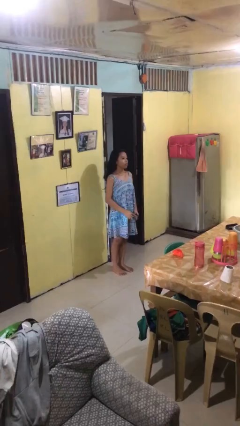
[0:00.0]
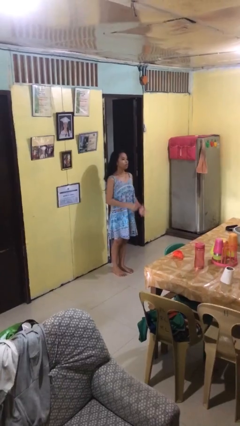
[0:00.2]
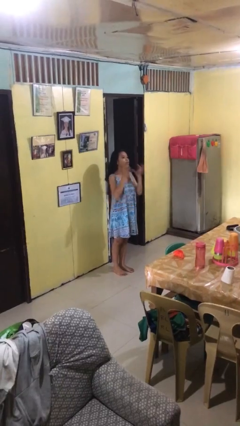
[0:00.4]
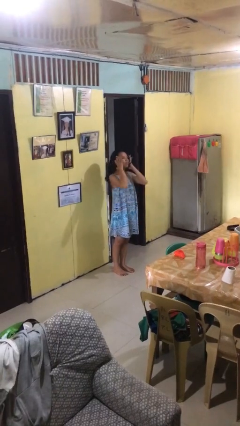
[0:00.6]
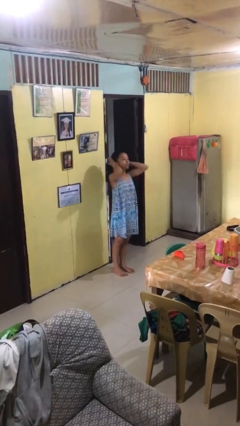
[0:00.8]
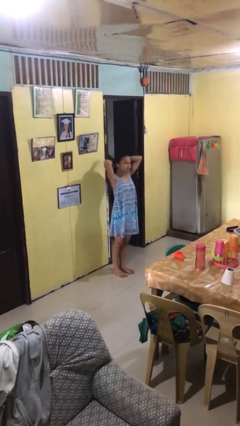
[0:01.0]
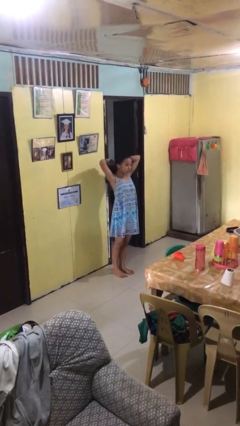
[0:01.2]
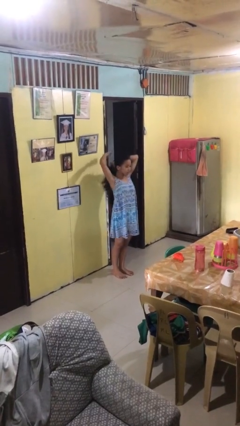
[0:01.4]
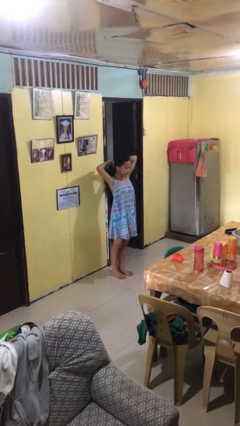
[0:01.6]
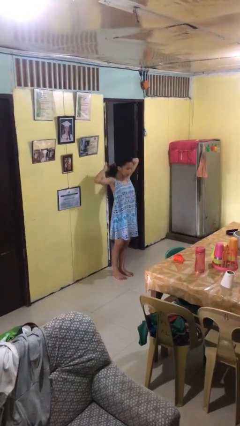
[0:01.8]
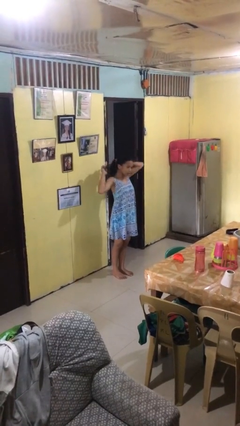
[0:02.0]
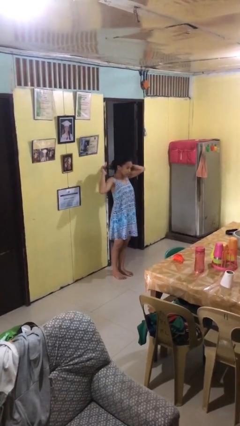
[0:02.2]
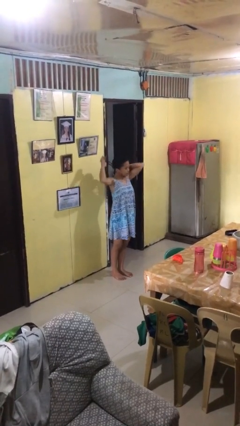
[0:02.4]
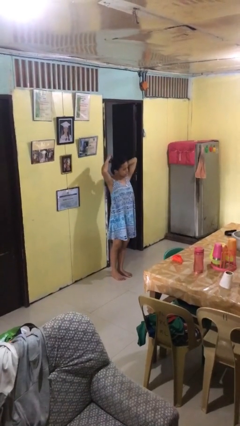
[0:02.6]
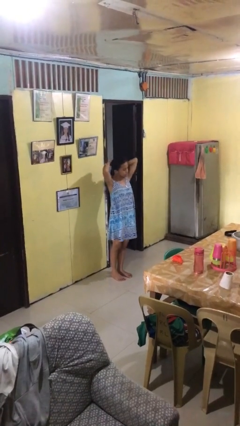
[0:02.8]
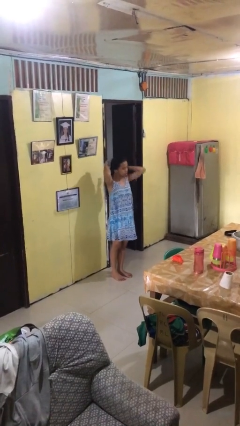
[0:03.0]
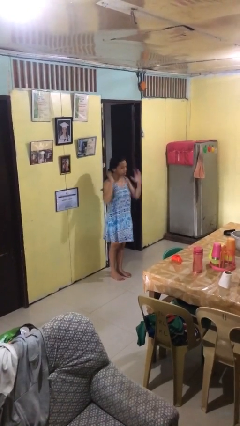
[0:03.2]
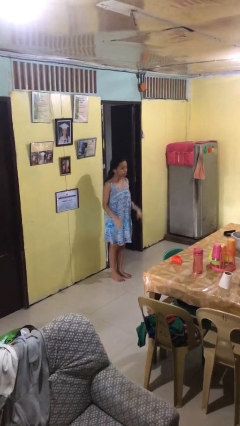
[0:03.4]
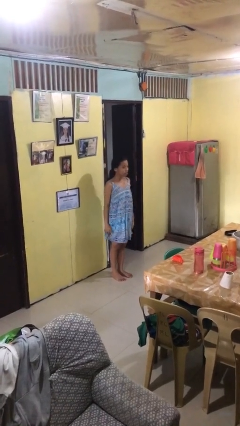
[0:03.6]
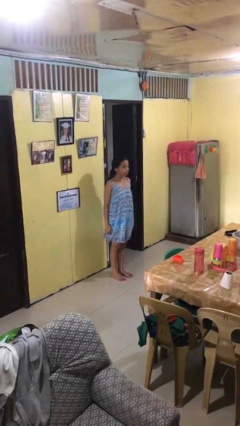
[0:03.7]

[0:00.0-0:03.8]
person puts hair in ponytail

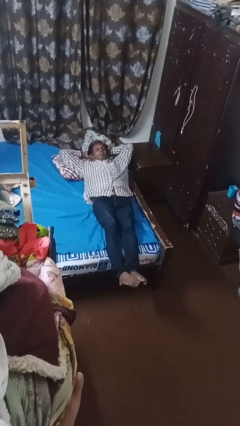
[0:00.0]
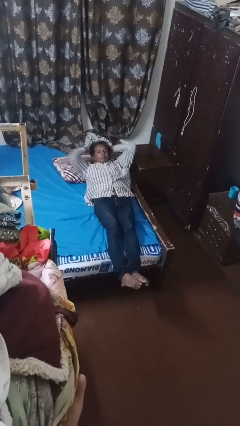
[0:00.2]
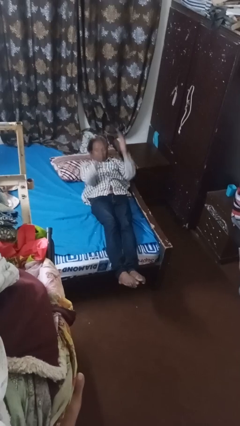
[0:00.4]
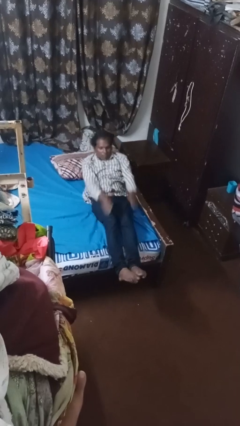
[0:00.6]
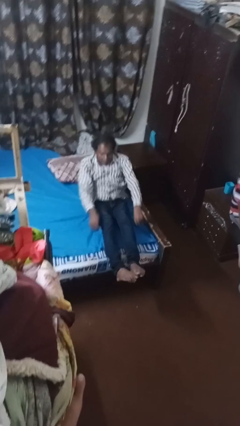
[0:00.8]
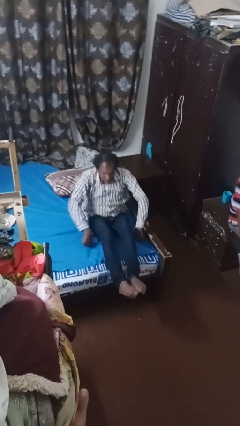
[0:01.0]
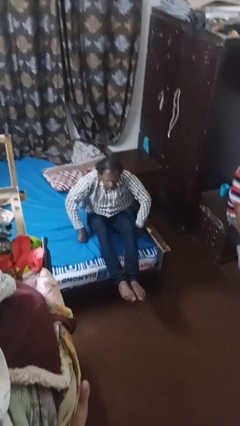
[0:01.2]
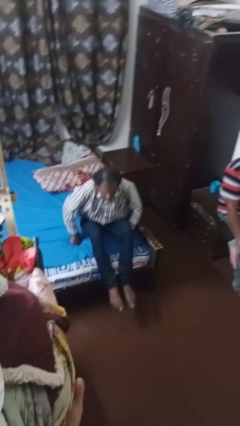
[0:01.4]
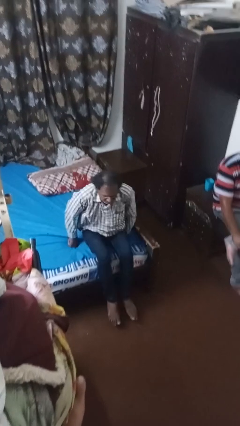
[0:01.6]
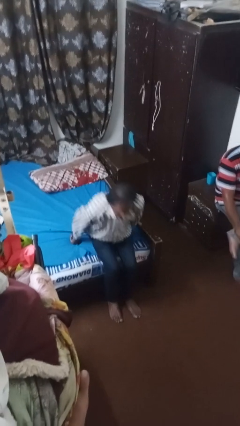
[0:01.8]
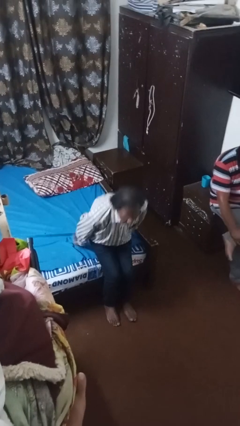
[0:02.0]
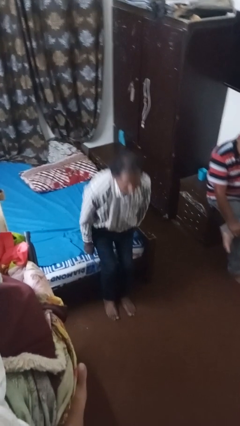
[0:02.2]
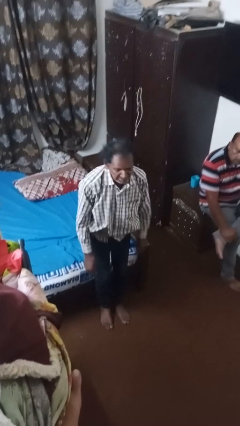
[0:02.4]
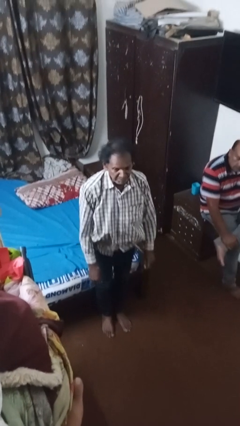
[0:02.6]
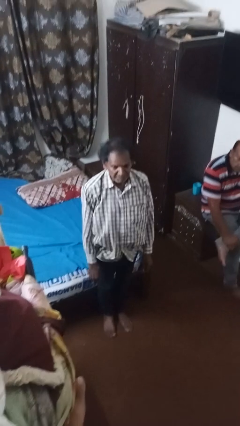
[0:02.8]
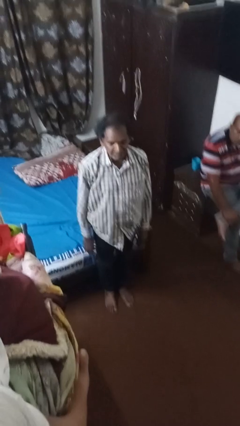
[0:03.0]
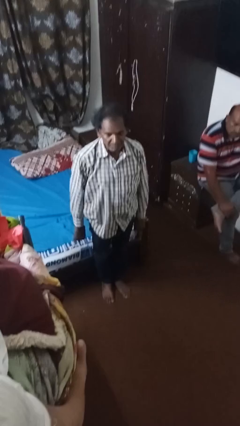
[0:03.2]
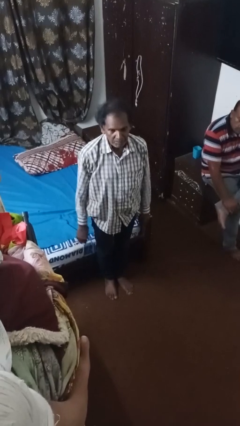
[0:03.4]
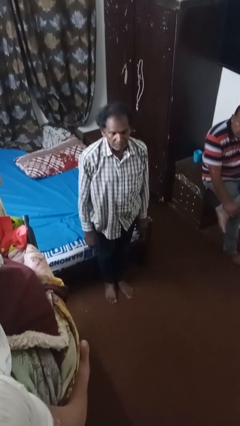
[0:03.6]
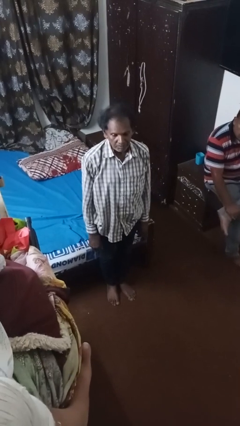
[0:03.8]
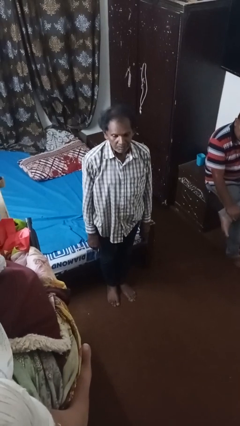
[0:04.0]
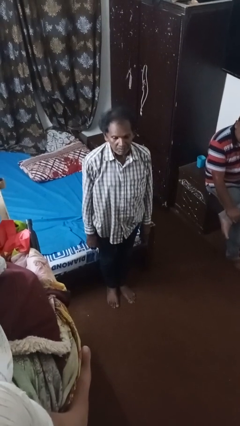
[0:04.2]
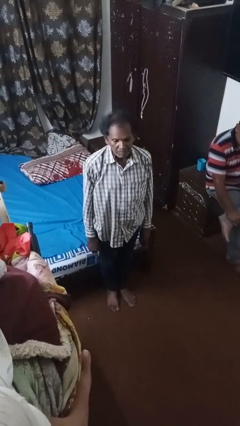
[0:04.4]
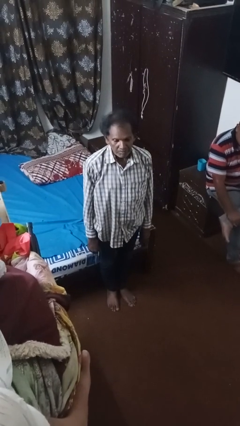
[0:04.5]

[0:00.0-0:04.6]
person stands up

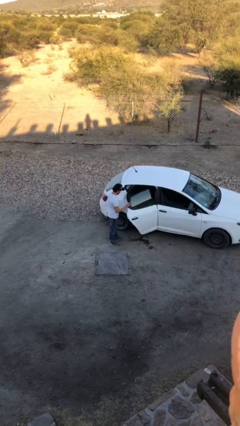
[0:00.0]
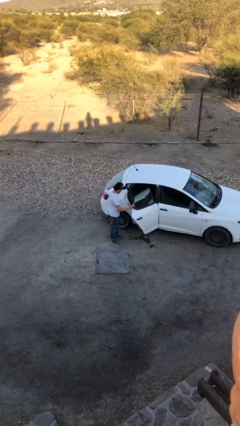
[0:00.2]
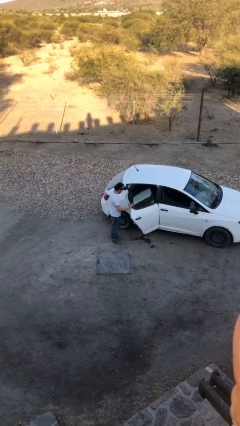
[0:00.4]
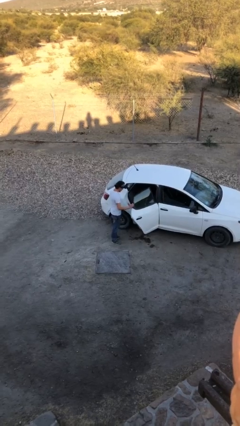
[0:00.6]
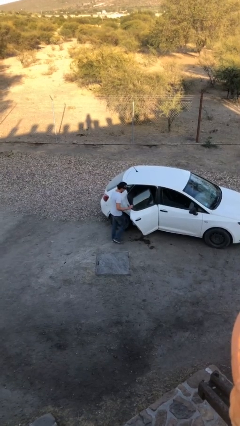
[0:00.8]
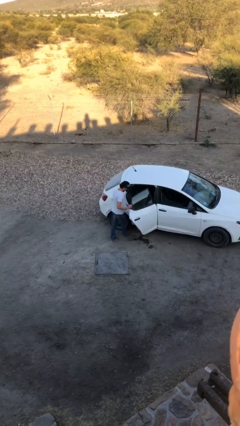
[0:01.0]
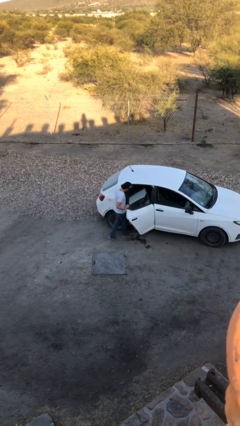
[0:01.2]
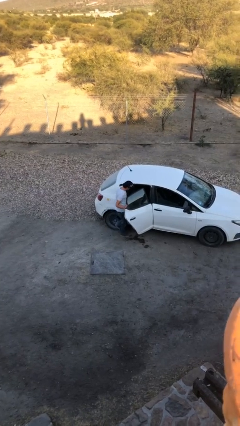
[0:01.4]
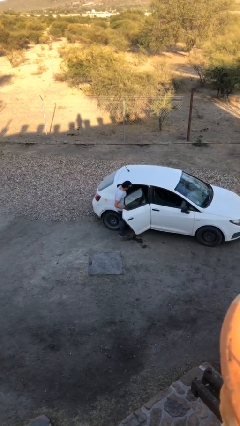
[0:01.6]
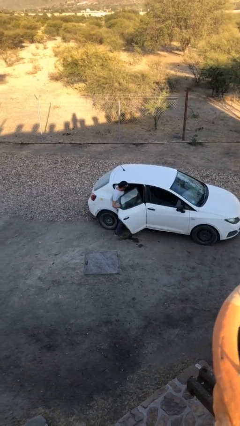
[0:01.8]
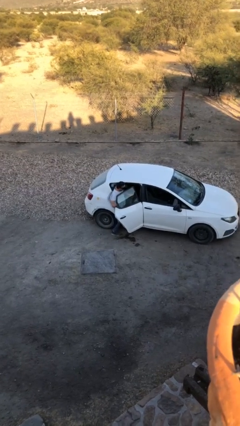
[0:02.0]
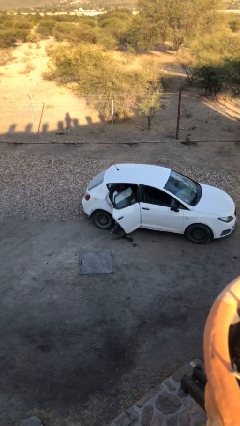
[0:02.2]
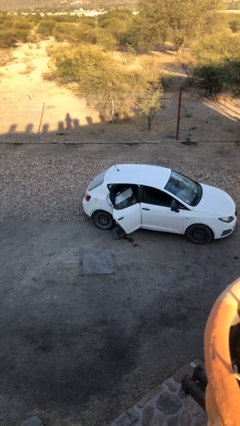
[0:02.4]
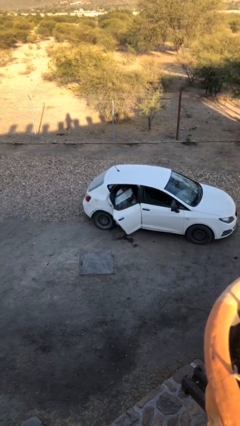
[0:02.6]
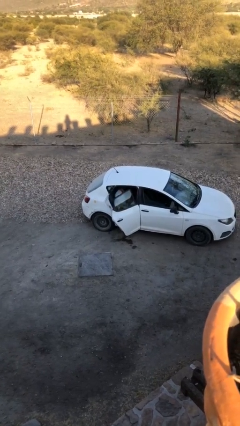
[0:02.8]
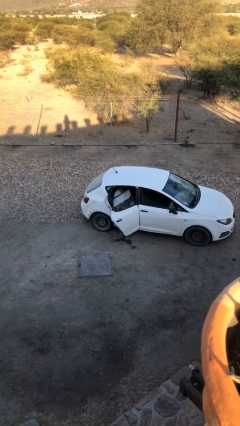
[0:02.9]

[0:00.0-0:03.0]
person enters car

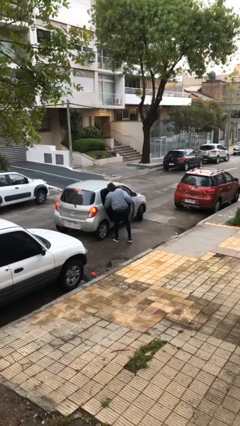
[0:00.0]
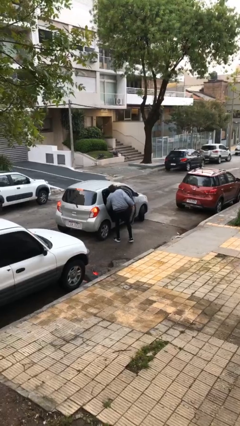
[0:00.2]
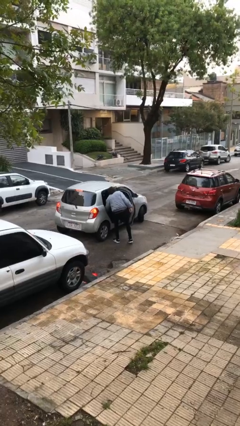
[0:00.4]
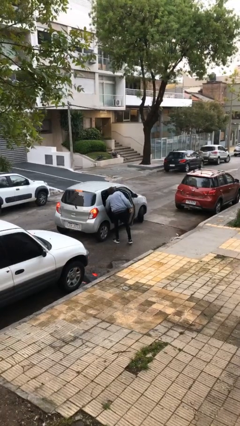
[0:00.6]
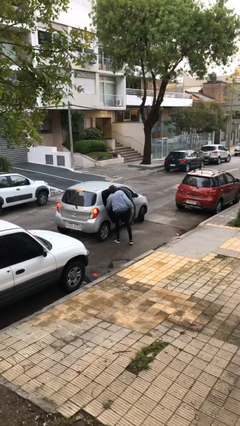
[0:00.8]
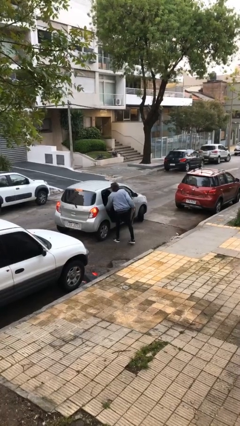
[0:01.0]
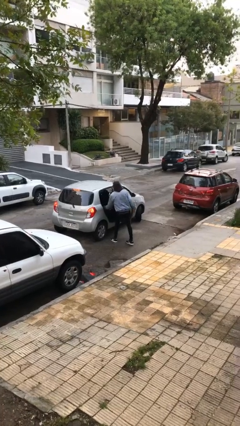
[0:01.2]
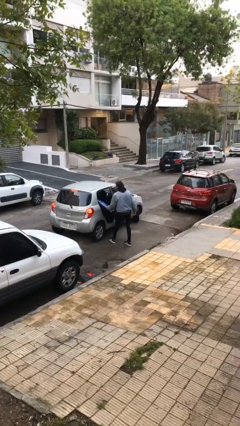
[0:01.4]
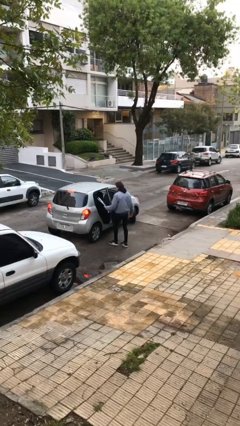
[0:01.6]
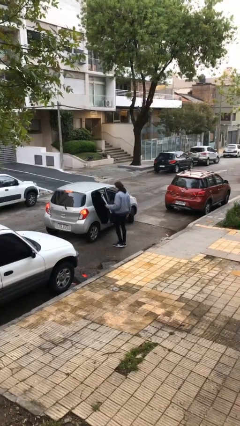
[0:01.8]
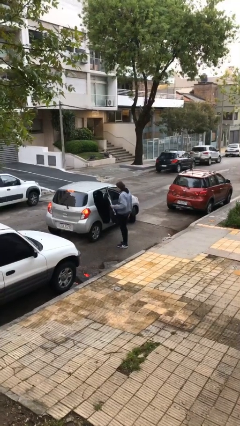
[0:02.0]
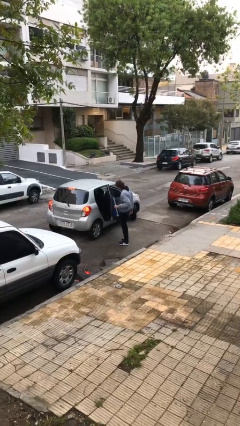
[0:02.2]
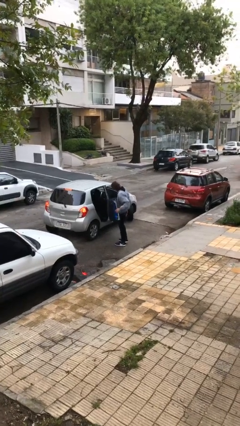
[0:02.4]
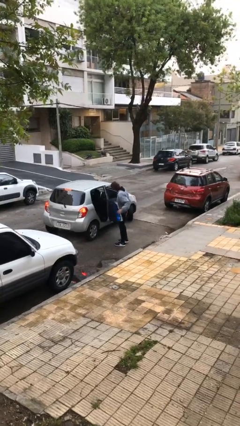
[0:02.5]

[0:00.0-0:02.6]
person unloads car

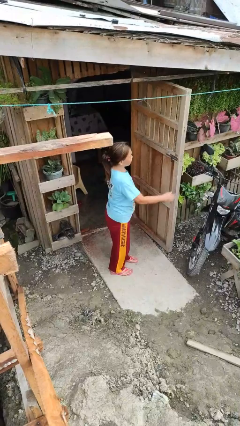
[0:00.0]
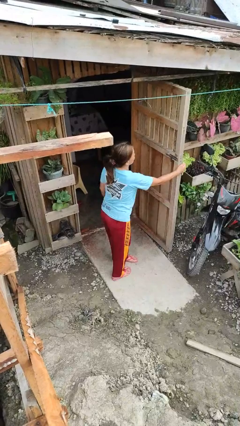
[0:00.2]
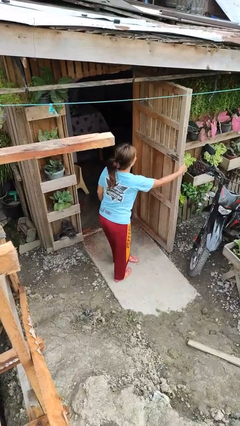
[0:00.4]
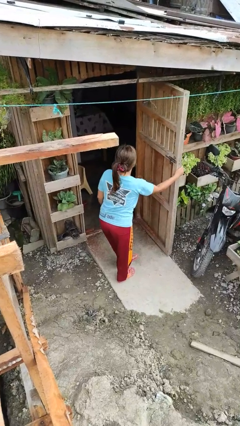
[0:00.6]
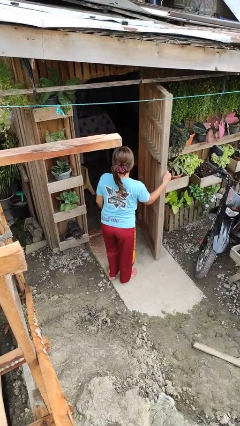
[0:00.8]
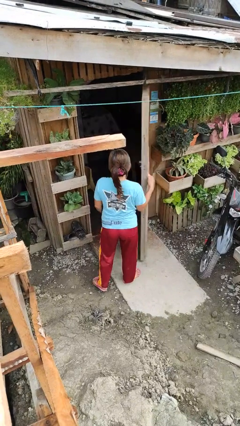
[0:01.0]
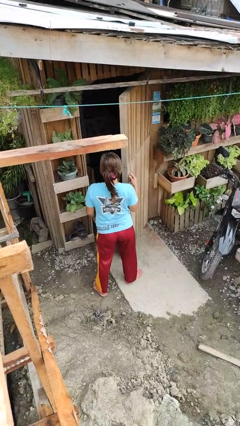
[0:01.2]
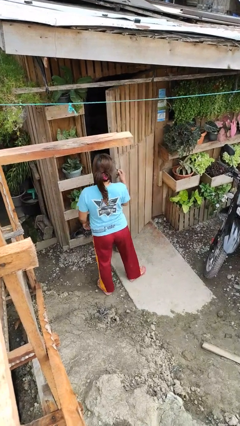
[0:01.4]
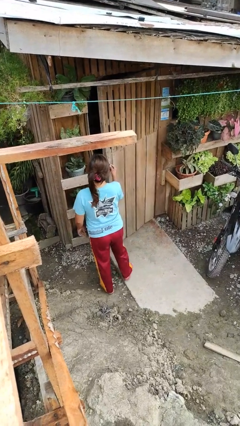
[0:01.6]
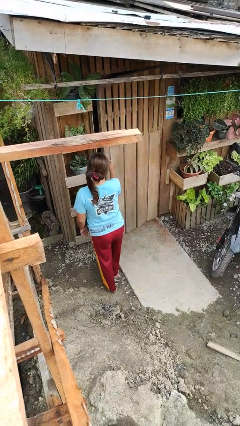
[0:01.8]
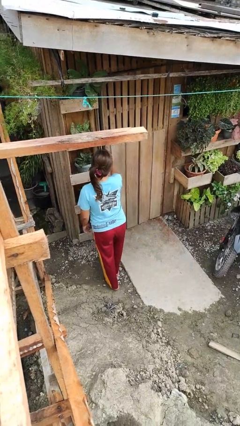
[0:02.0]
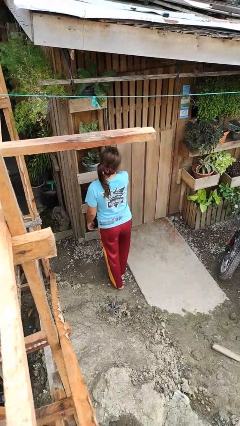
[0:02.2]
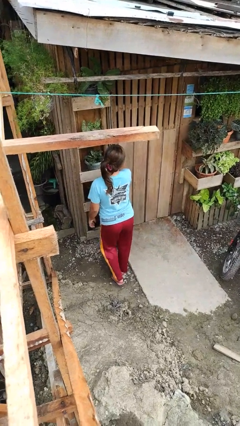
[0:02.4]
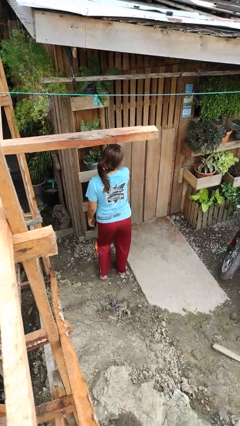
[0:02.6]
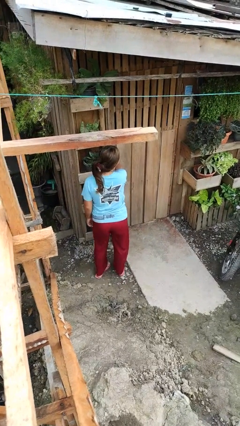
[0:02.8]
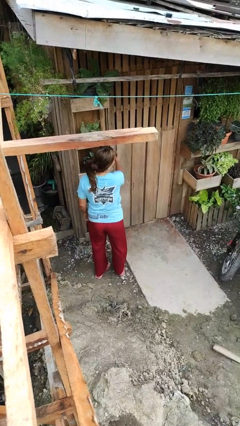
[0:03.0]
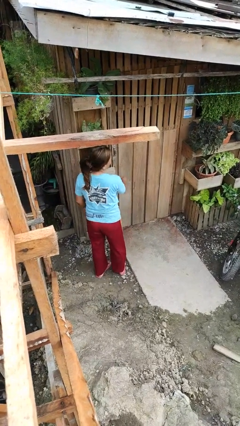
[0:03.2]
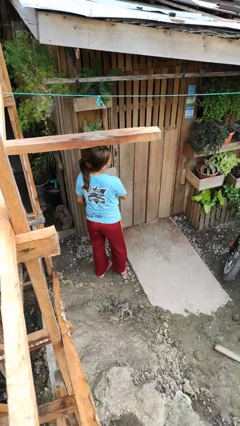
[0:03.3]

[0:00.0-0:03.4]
person closes facility door

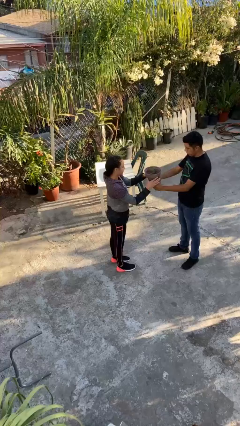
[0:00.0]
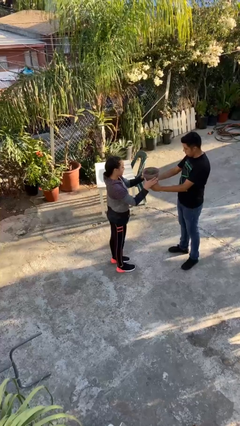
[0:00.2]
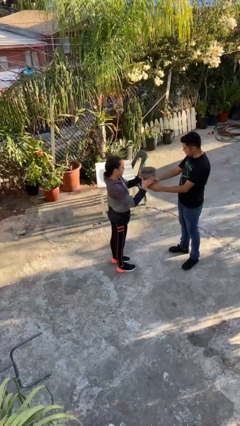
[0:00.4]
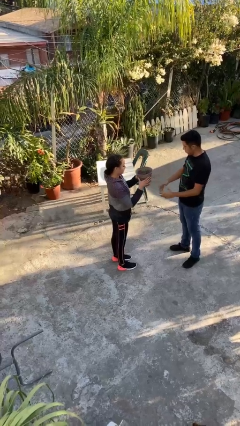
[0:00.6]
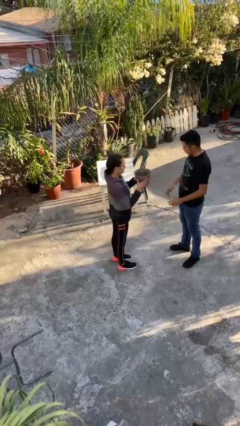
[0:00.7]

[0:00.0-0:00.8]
person transfers object to person
